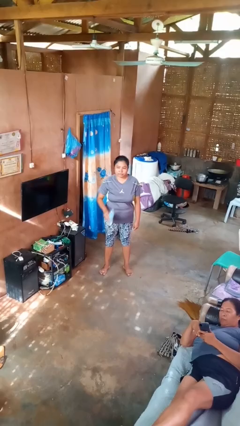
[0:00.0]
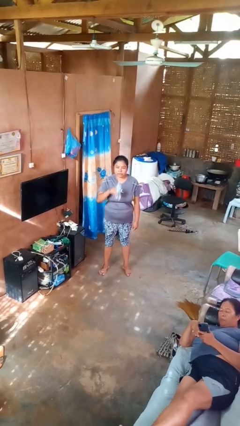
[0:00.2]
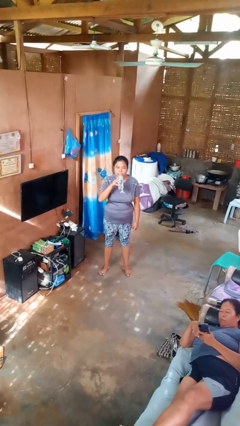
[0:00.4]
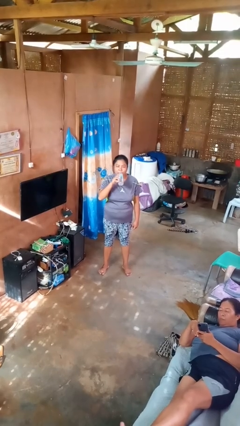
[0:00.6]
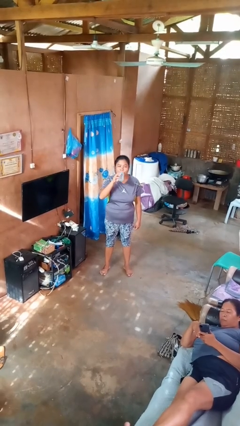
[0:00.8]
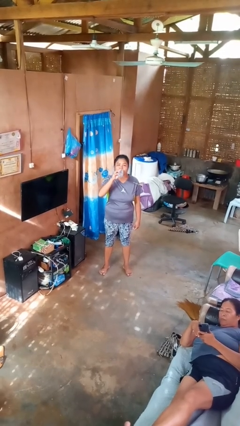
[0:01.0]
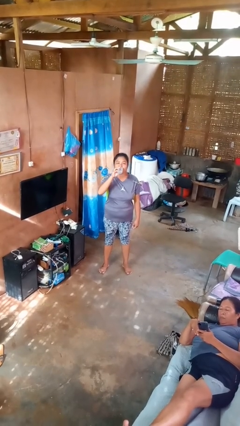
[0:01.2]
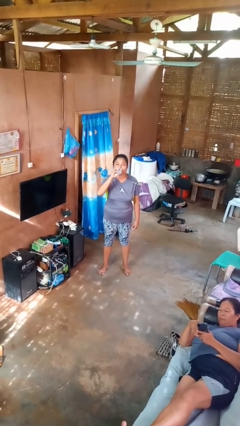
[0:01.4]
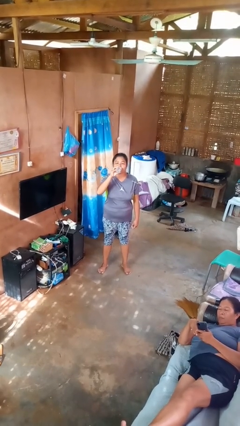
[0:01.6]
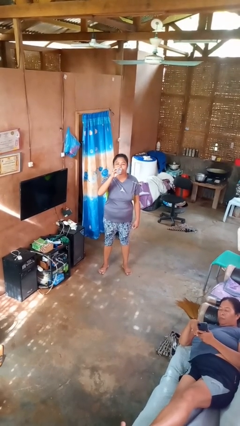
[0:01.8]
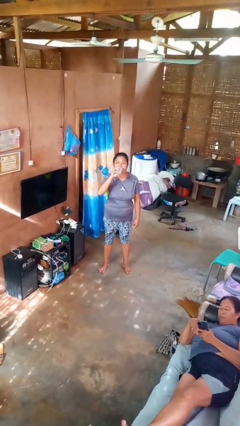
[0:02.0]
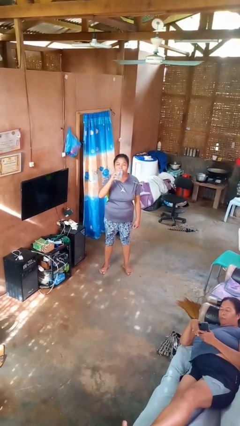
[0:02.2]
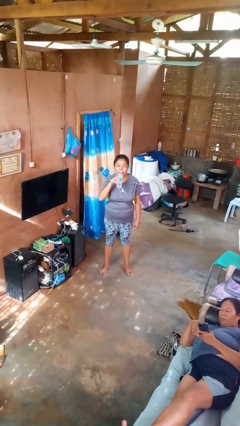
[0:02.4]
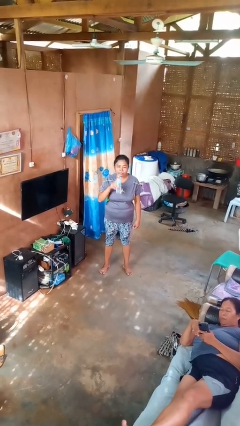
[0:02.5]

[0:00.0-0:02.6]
person drinks from bottle

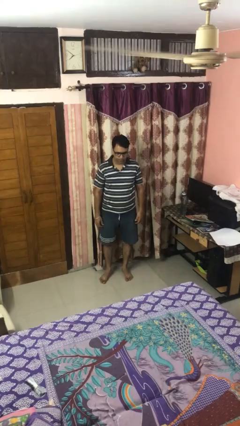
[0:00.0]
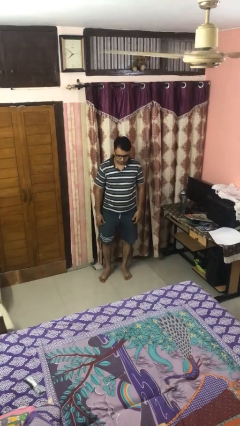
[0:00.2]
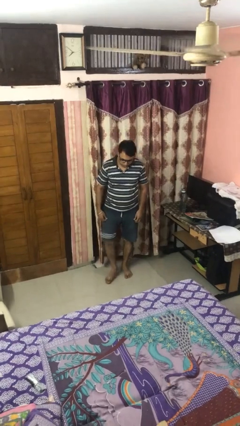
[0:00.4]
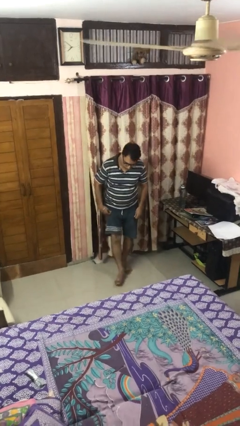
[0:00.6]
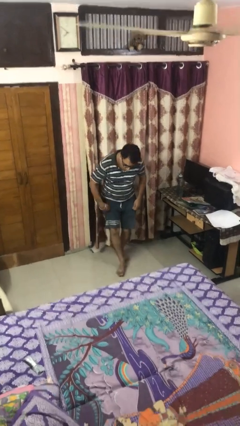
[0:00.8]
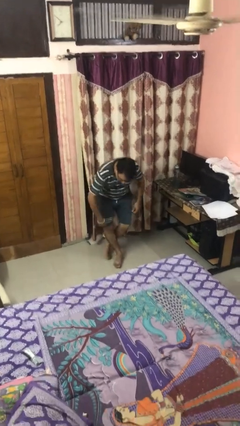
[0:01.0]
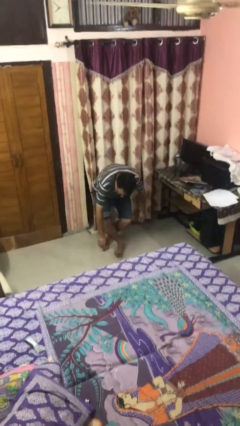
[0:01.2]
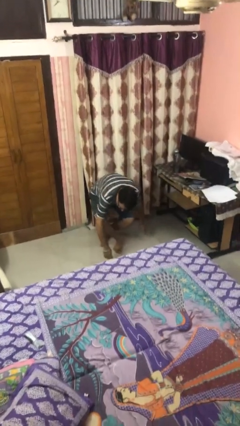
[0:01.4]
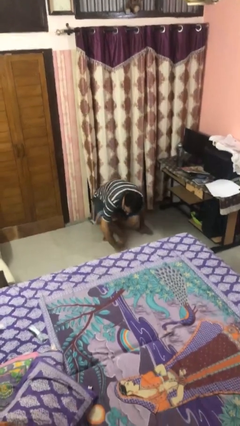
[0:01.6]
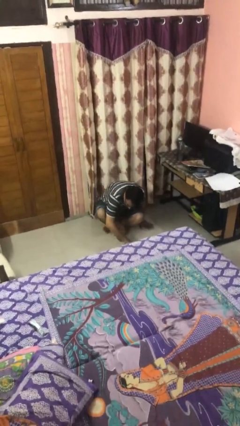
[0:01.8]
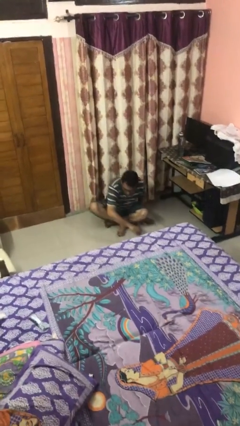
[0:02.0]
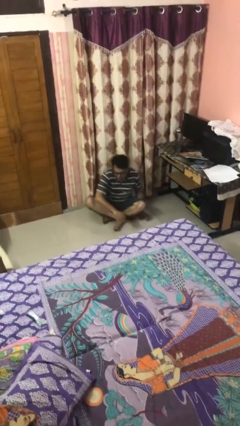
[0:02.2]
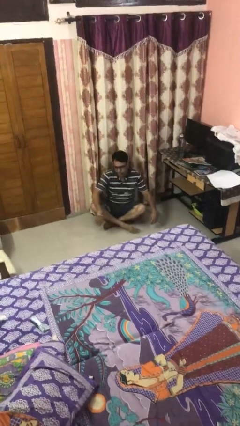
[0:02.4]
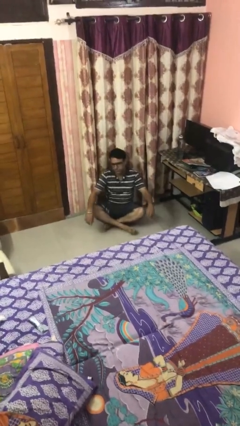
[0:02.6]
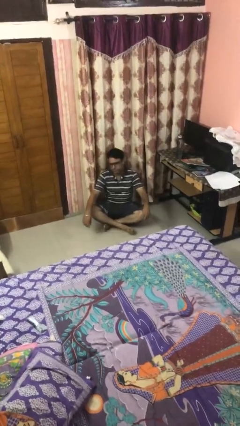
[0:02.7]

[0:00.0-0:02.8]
person sits crisscross

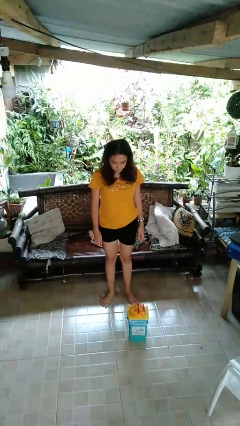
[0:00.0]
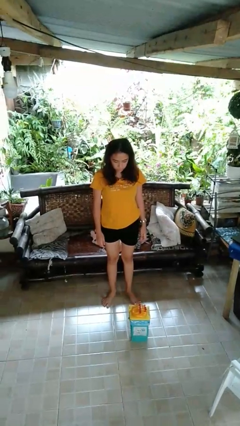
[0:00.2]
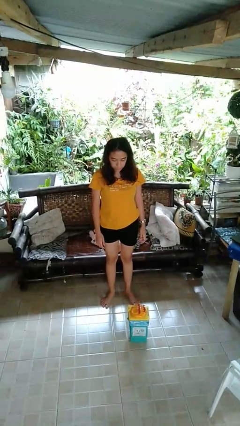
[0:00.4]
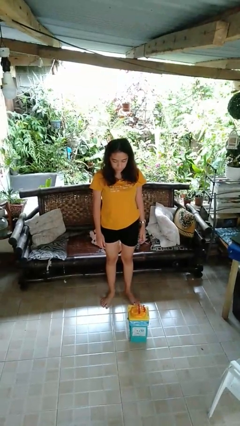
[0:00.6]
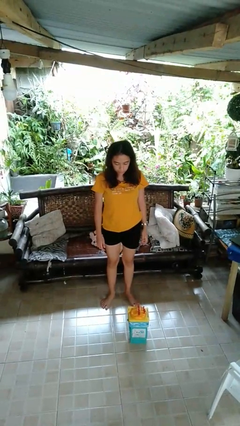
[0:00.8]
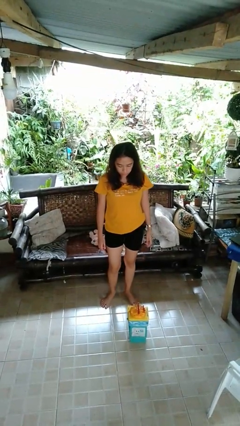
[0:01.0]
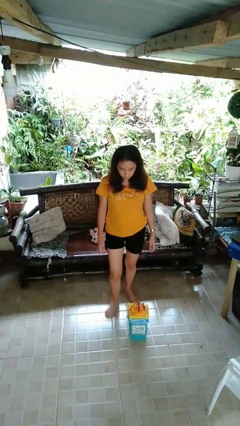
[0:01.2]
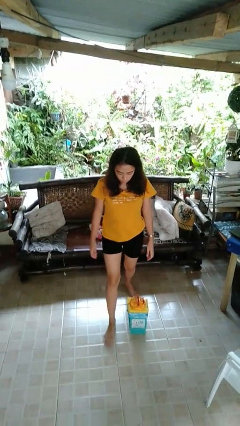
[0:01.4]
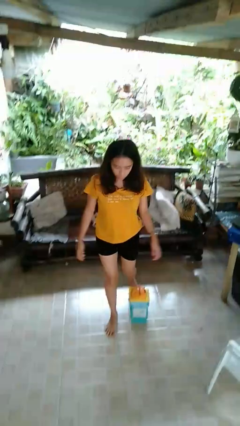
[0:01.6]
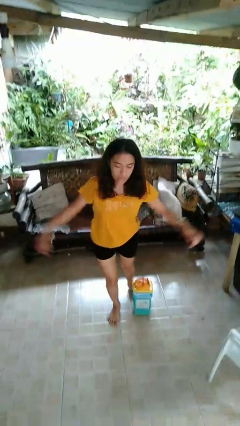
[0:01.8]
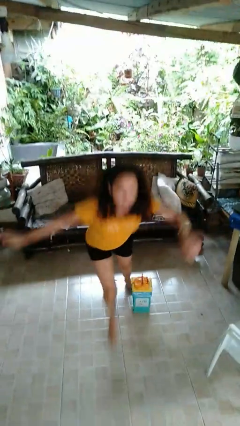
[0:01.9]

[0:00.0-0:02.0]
person trips on object on floor

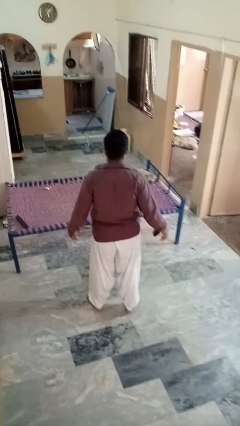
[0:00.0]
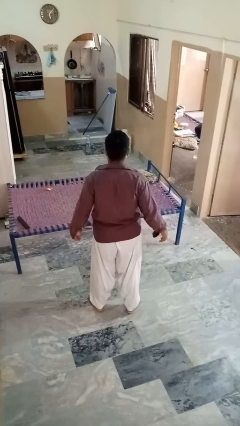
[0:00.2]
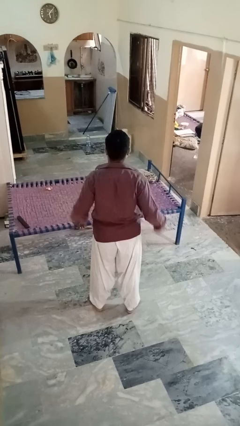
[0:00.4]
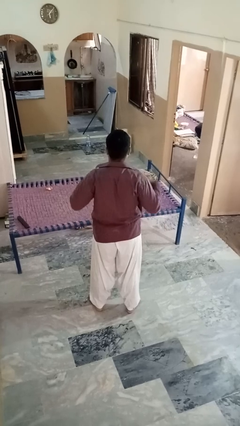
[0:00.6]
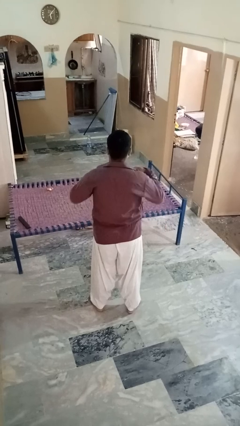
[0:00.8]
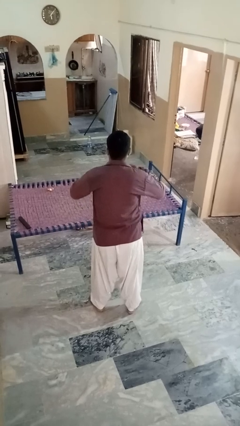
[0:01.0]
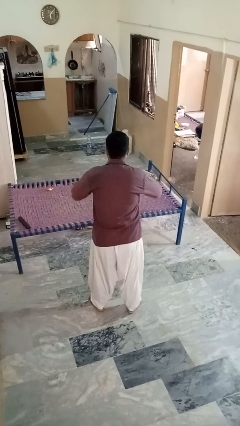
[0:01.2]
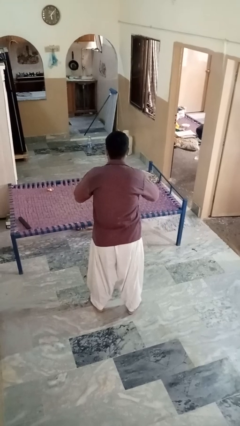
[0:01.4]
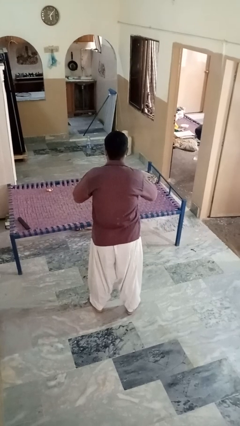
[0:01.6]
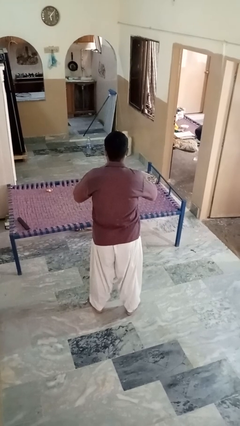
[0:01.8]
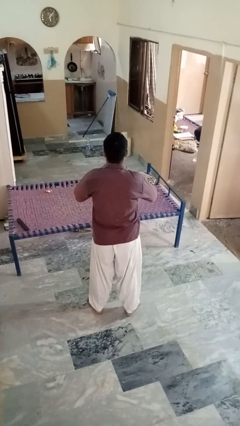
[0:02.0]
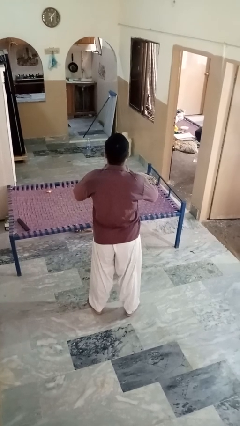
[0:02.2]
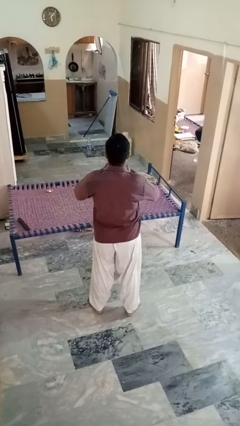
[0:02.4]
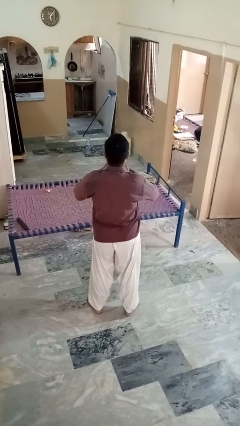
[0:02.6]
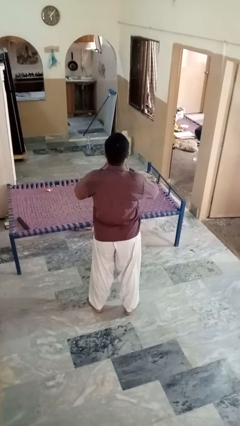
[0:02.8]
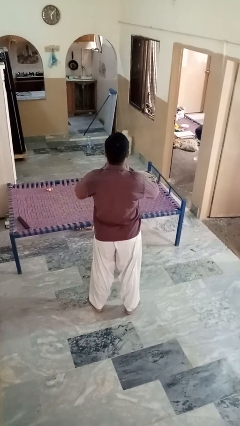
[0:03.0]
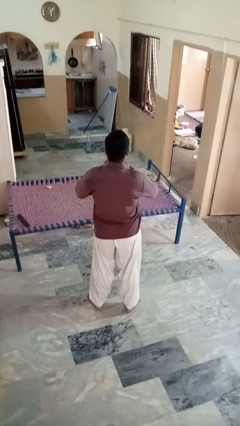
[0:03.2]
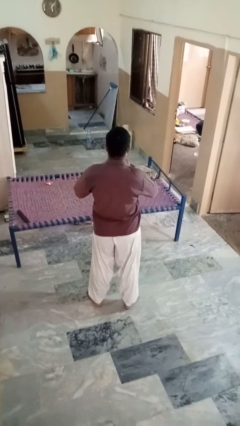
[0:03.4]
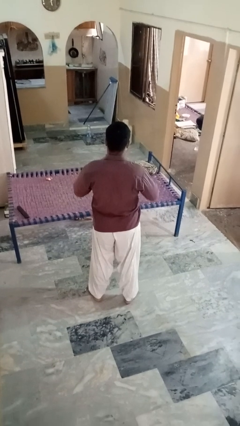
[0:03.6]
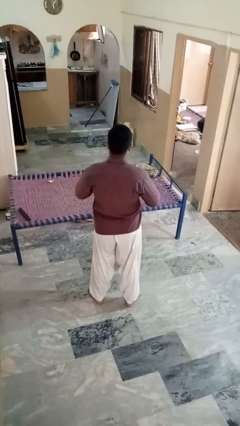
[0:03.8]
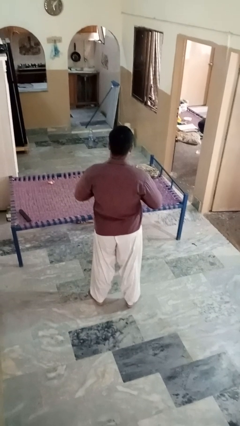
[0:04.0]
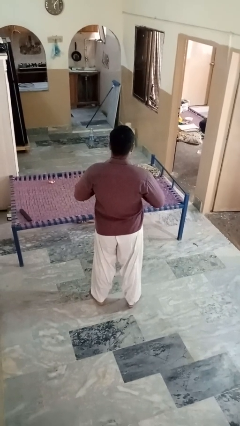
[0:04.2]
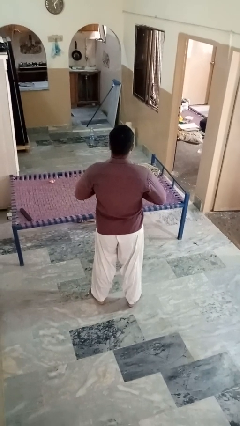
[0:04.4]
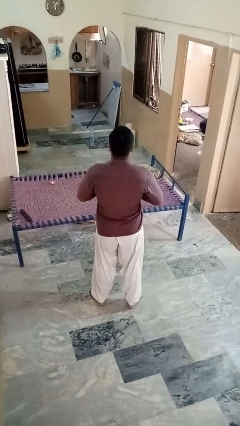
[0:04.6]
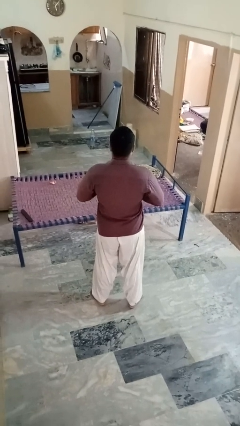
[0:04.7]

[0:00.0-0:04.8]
person buttons shirt

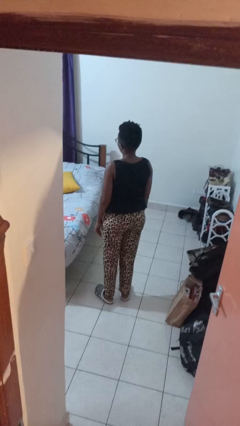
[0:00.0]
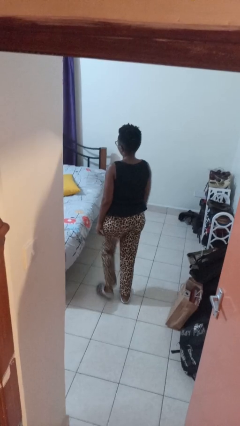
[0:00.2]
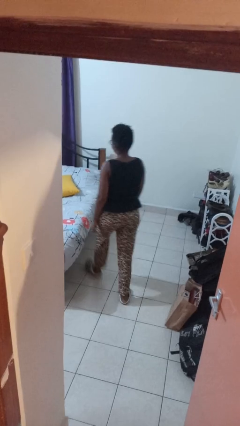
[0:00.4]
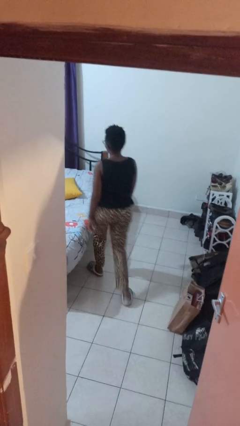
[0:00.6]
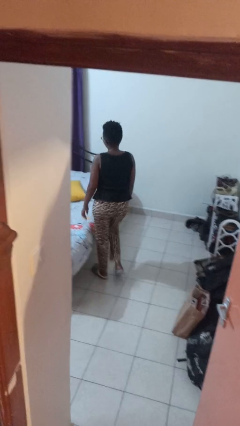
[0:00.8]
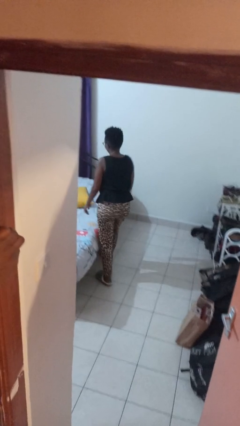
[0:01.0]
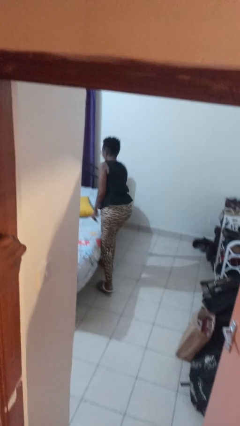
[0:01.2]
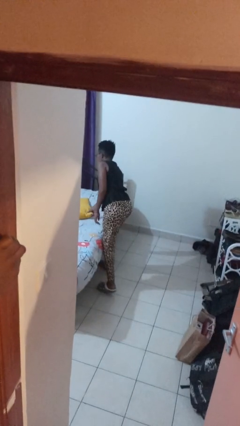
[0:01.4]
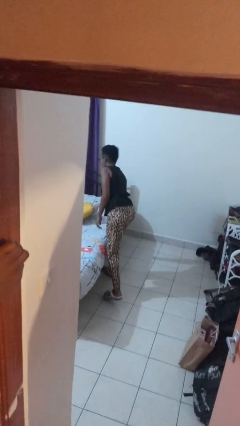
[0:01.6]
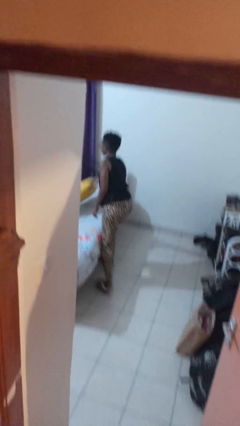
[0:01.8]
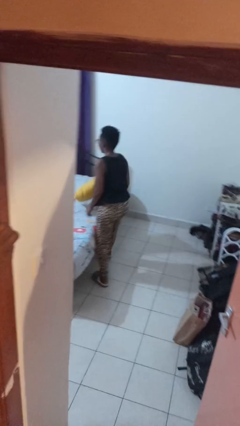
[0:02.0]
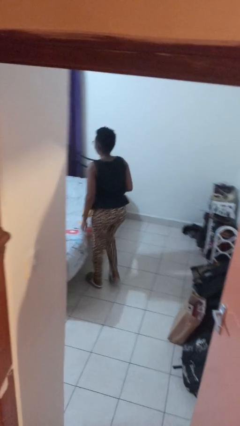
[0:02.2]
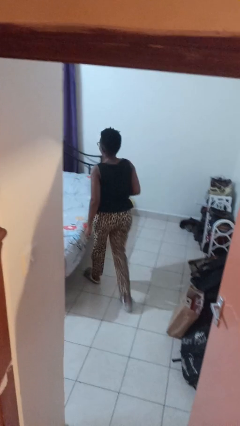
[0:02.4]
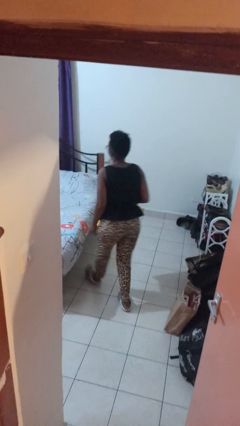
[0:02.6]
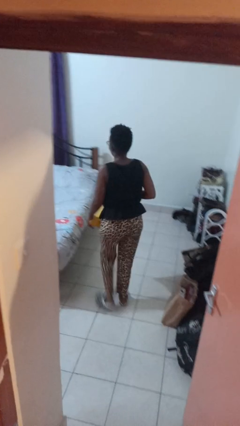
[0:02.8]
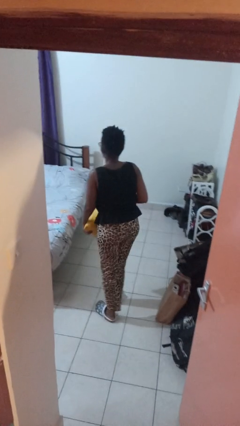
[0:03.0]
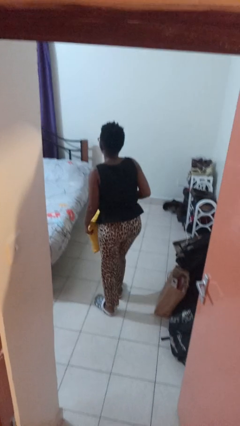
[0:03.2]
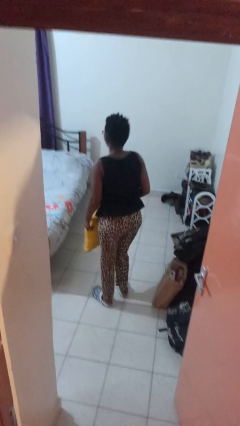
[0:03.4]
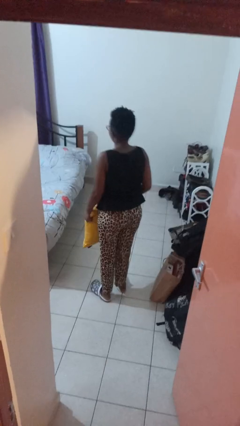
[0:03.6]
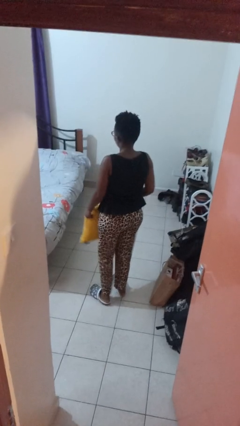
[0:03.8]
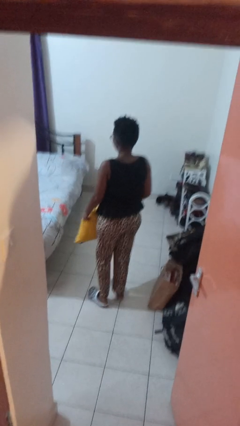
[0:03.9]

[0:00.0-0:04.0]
person picks up object from bed

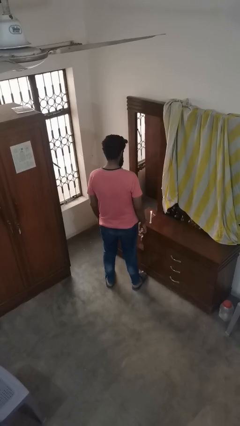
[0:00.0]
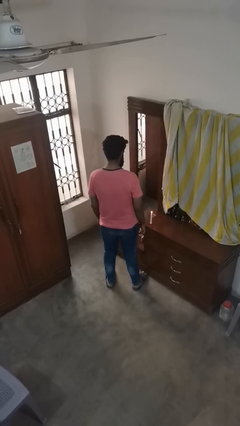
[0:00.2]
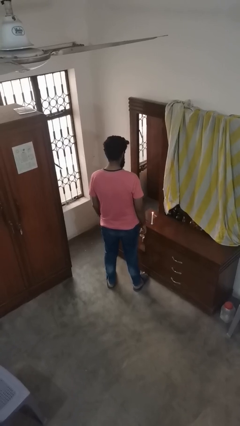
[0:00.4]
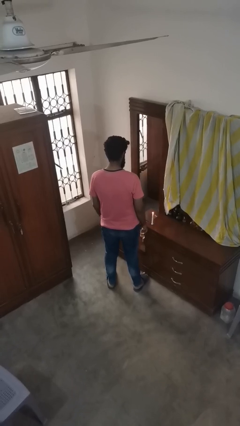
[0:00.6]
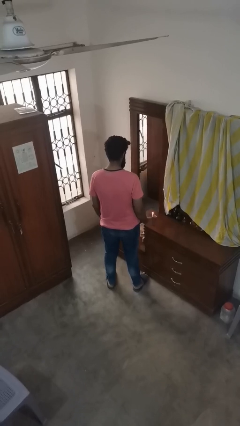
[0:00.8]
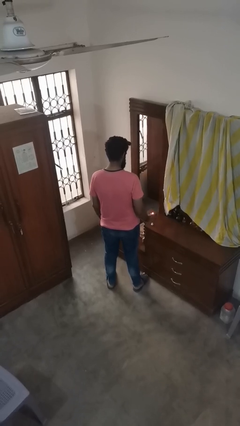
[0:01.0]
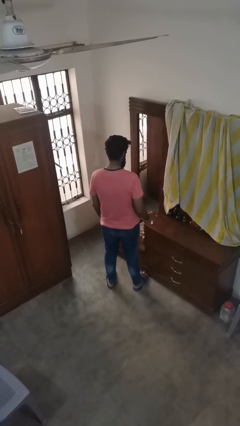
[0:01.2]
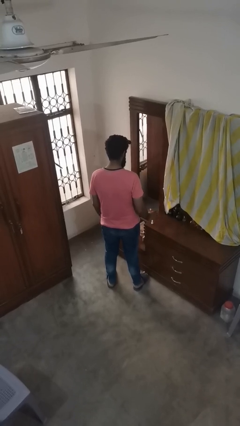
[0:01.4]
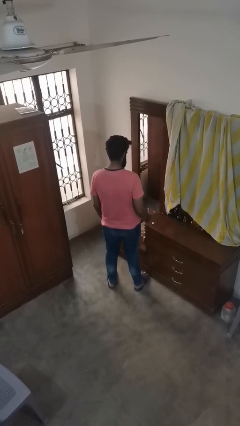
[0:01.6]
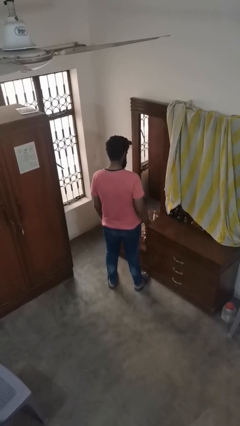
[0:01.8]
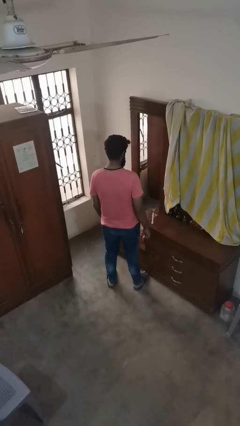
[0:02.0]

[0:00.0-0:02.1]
person extinguishes candle
